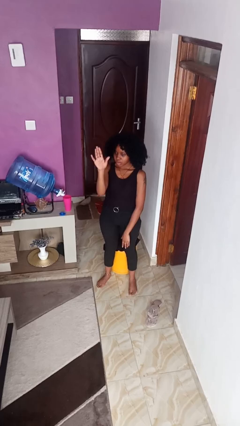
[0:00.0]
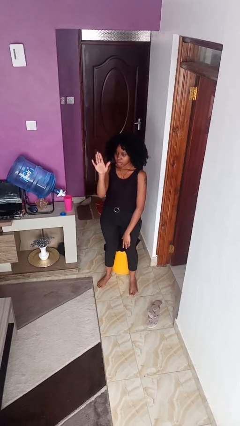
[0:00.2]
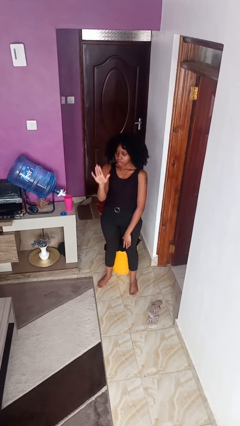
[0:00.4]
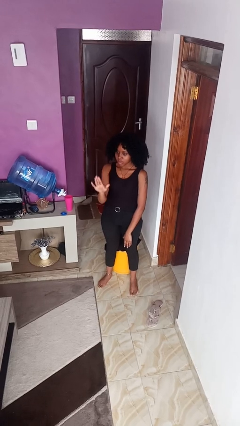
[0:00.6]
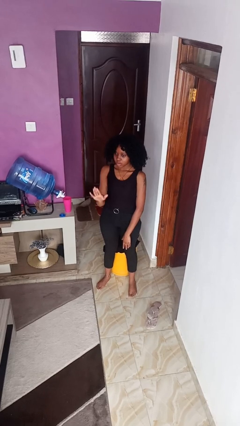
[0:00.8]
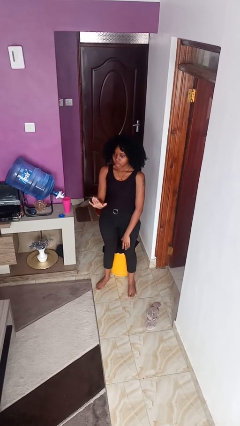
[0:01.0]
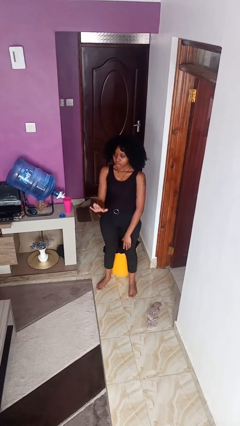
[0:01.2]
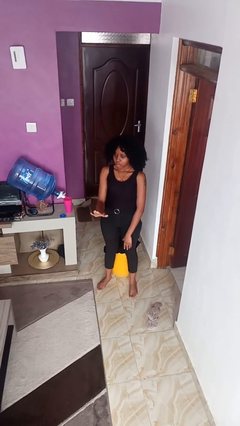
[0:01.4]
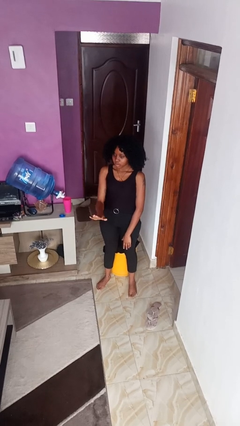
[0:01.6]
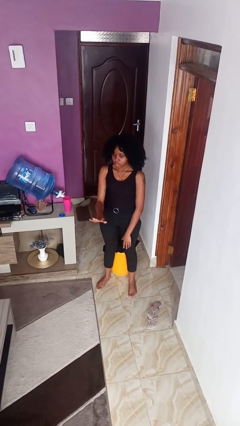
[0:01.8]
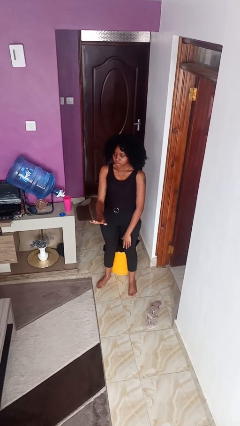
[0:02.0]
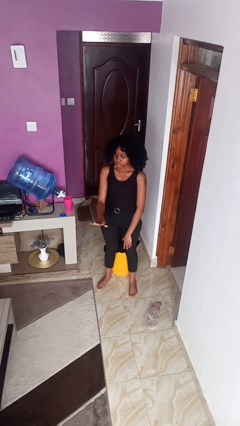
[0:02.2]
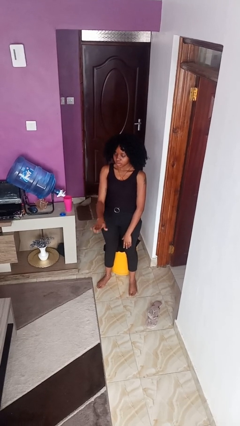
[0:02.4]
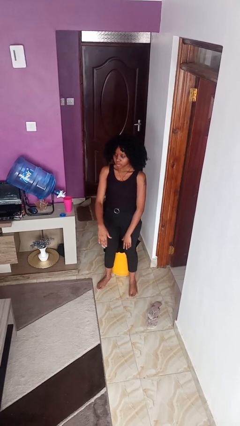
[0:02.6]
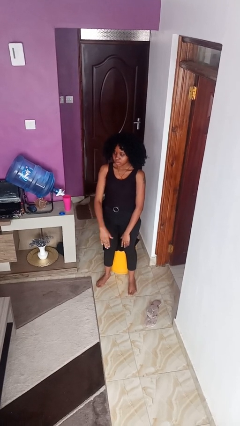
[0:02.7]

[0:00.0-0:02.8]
person gestures swipe down

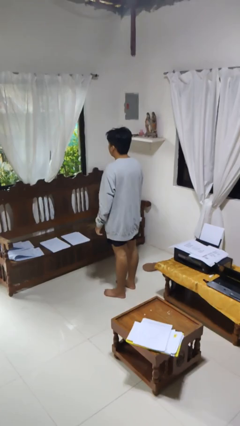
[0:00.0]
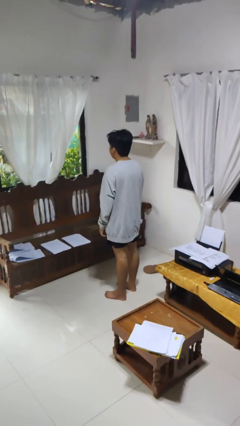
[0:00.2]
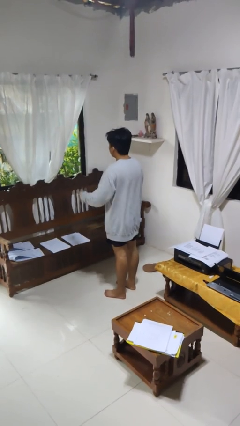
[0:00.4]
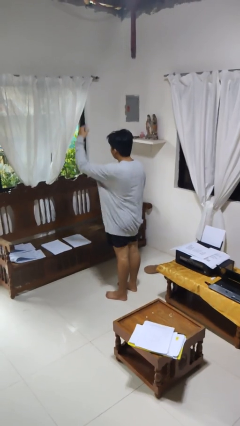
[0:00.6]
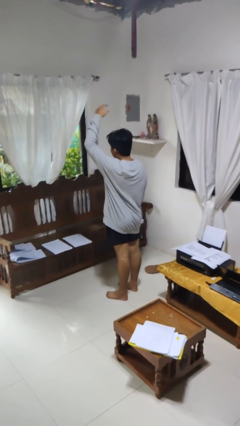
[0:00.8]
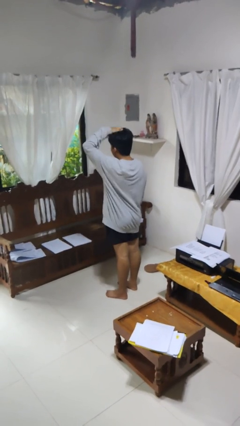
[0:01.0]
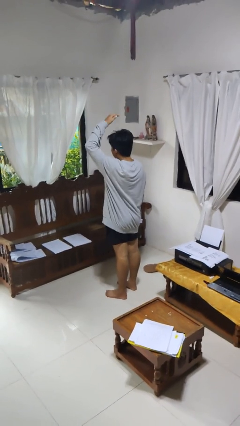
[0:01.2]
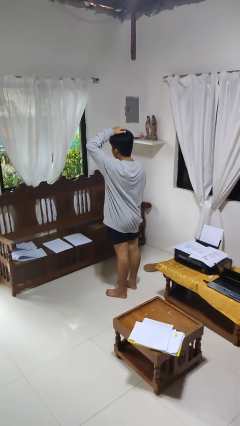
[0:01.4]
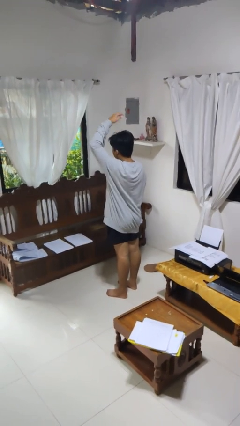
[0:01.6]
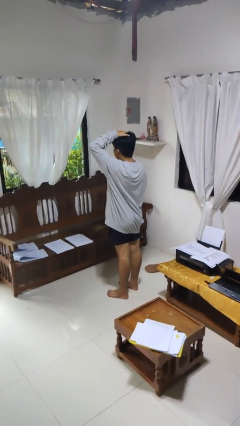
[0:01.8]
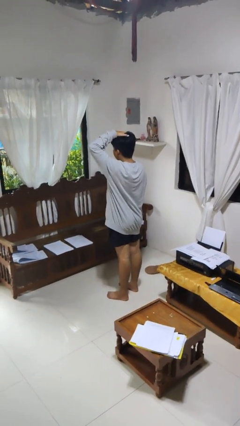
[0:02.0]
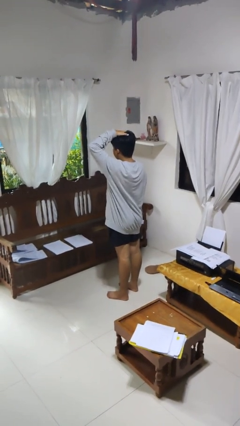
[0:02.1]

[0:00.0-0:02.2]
person pats head

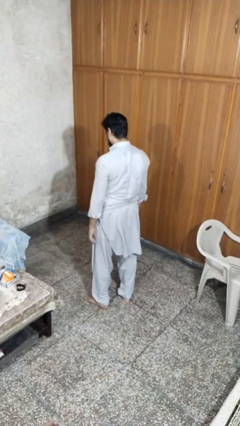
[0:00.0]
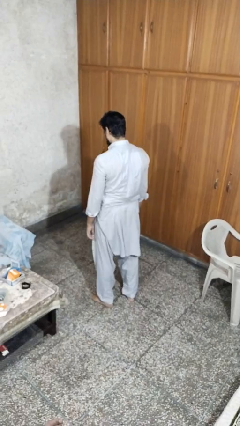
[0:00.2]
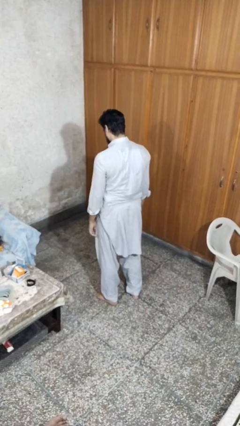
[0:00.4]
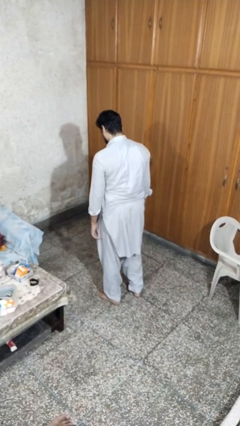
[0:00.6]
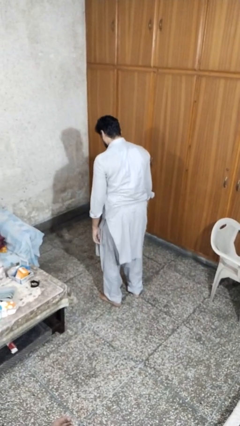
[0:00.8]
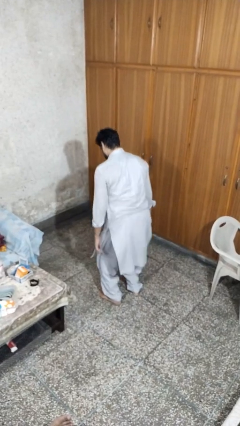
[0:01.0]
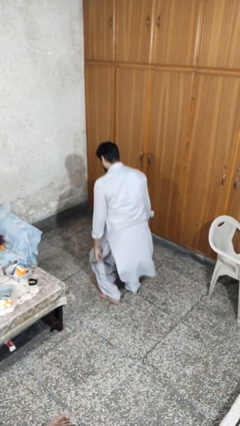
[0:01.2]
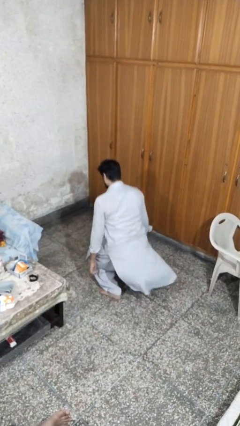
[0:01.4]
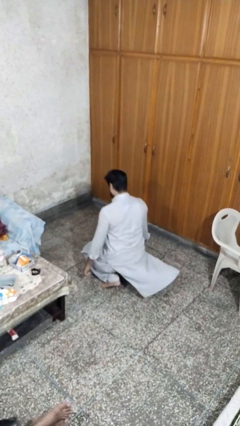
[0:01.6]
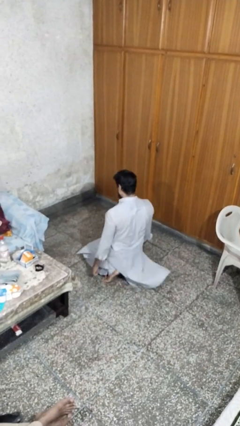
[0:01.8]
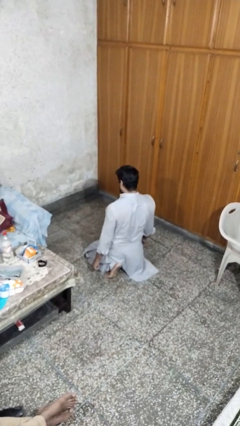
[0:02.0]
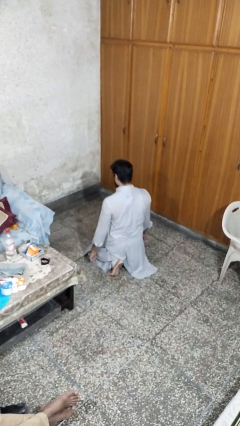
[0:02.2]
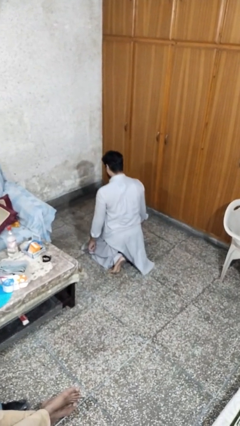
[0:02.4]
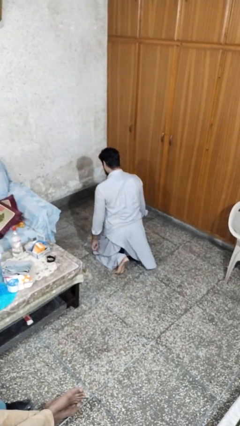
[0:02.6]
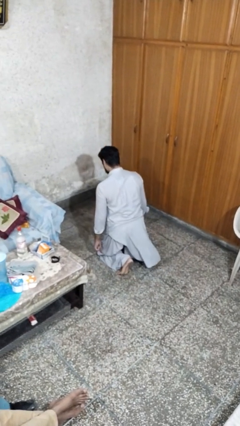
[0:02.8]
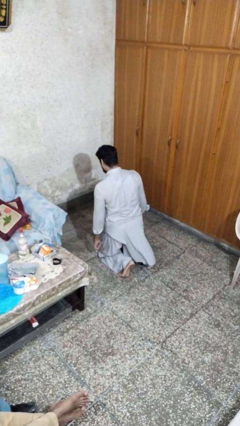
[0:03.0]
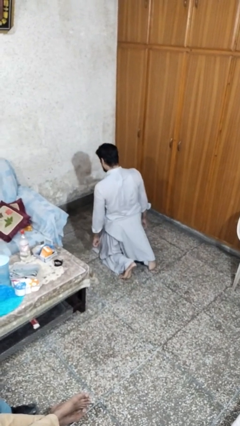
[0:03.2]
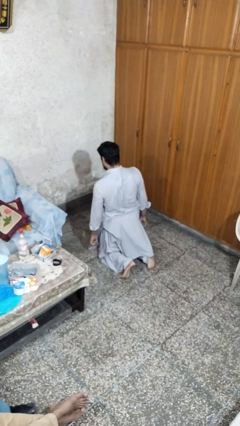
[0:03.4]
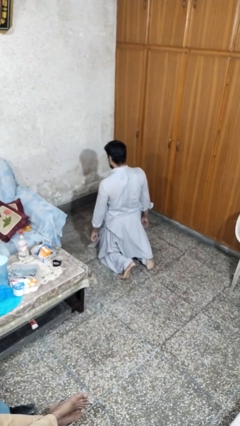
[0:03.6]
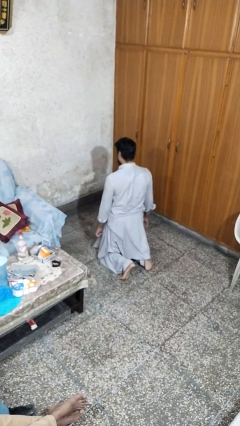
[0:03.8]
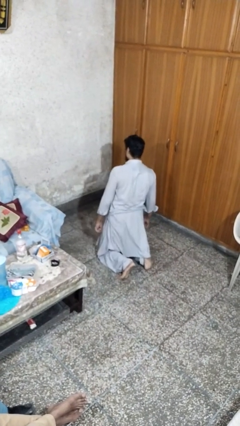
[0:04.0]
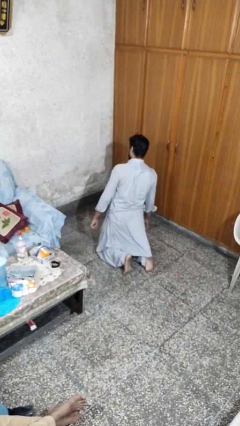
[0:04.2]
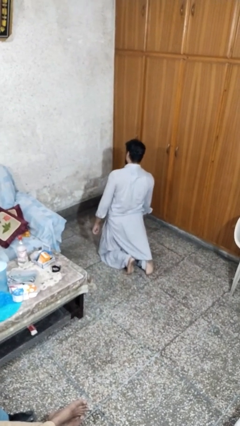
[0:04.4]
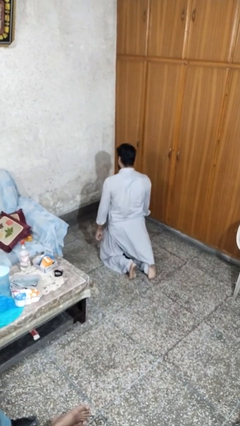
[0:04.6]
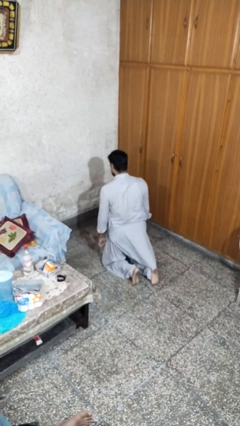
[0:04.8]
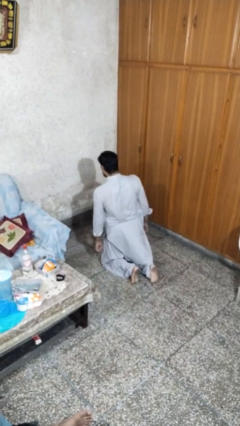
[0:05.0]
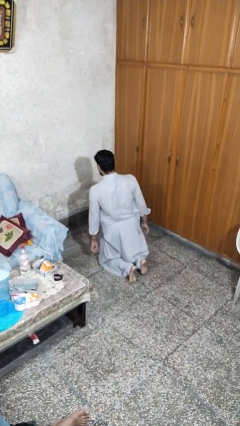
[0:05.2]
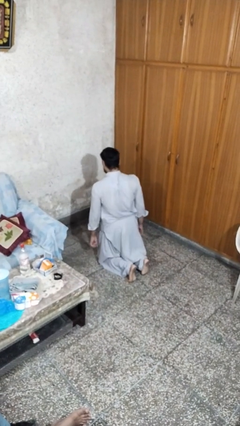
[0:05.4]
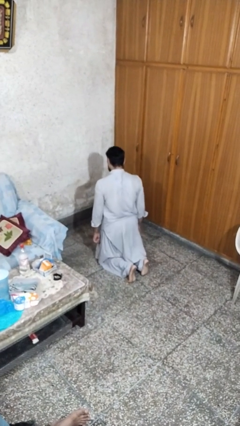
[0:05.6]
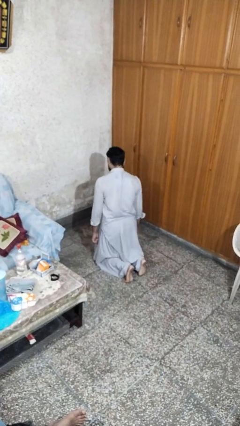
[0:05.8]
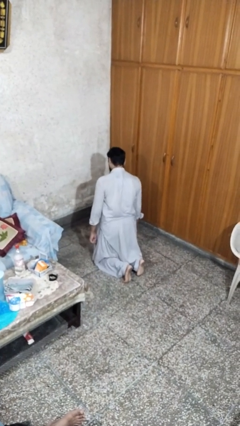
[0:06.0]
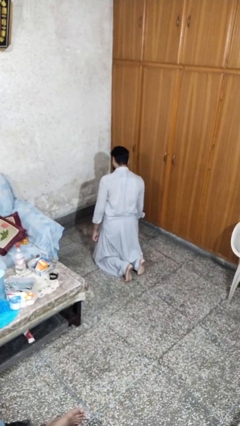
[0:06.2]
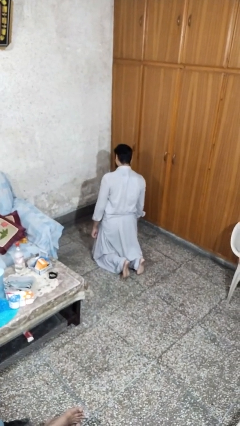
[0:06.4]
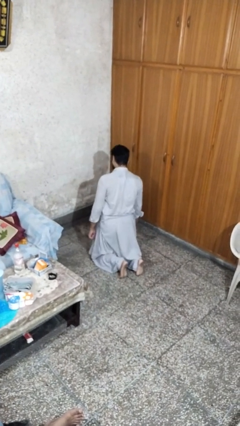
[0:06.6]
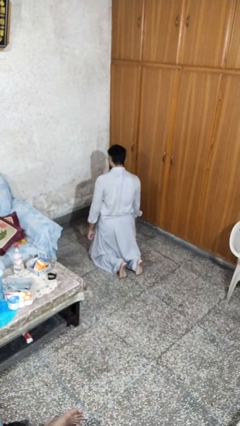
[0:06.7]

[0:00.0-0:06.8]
person exercises with lunges

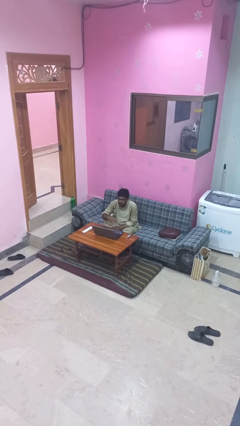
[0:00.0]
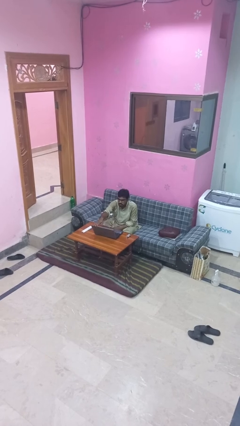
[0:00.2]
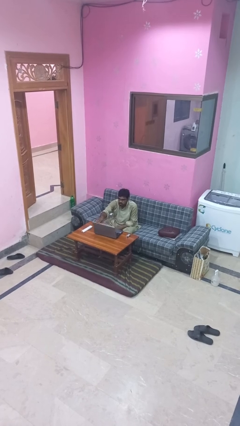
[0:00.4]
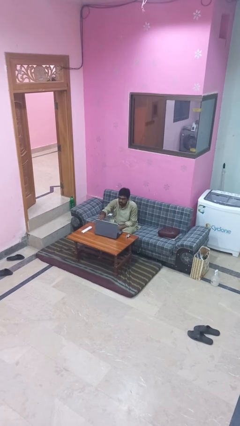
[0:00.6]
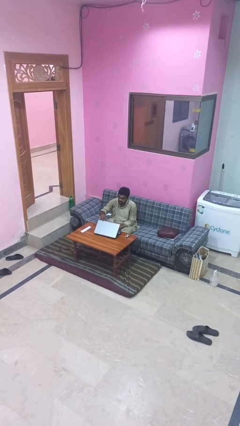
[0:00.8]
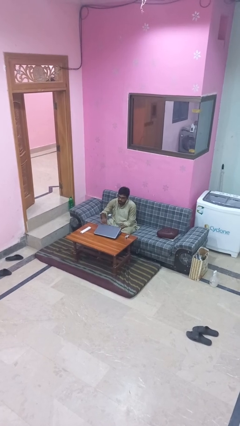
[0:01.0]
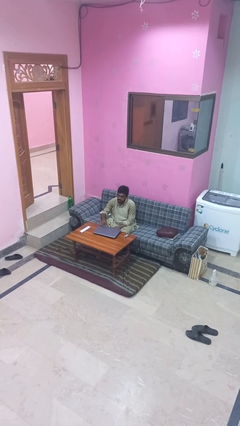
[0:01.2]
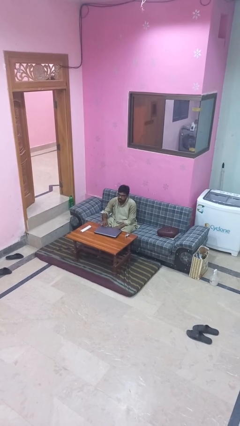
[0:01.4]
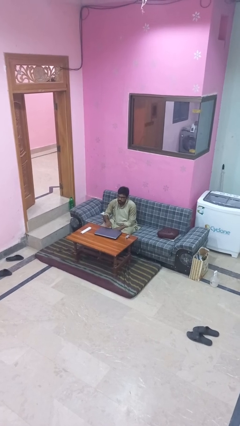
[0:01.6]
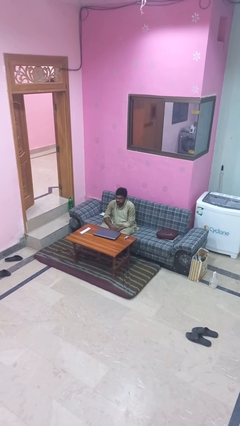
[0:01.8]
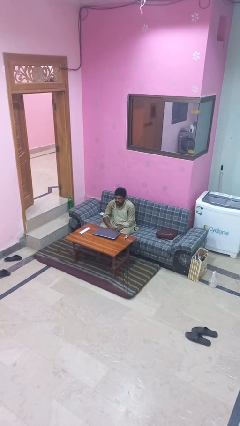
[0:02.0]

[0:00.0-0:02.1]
person closes laptop

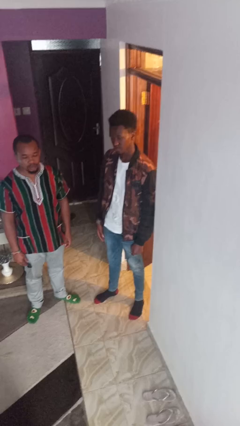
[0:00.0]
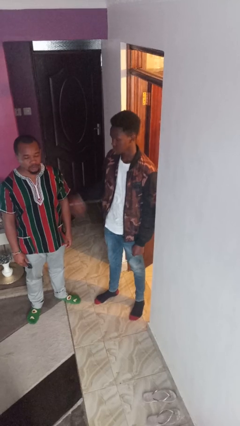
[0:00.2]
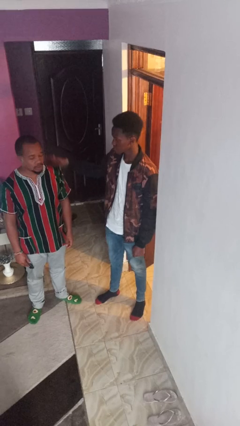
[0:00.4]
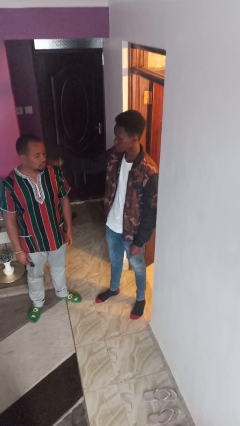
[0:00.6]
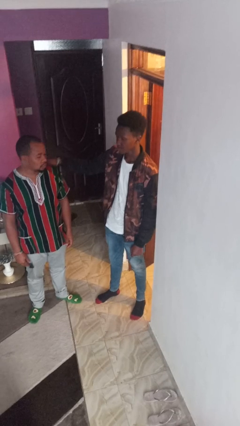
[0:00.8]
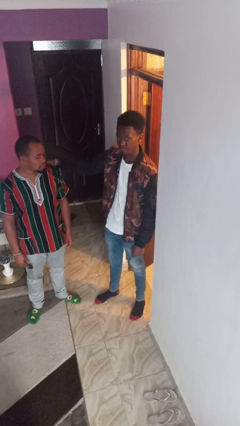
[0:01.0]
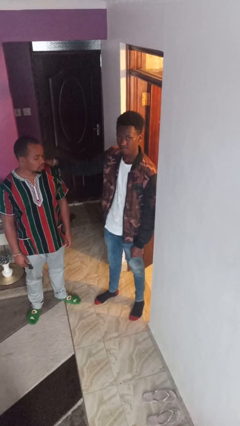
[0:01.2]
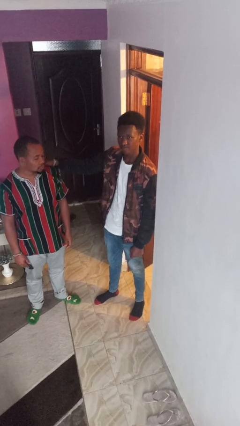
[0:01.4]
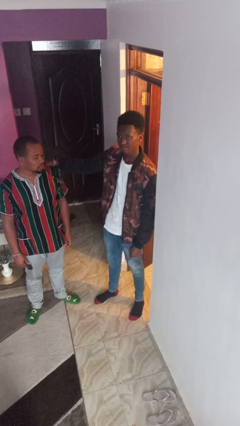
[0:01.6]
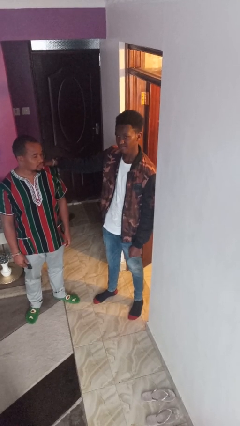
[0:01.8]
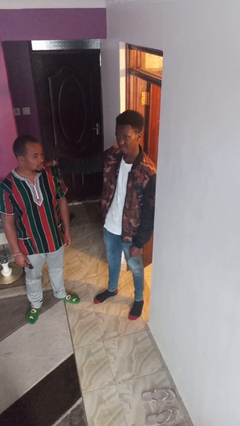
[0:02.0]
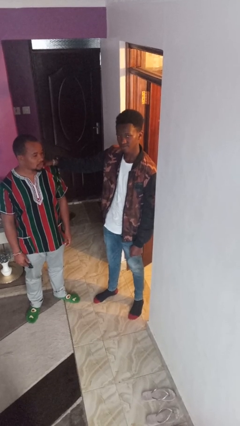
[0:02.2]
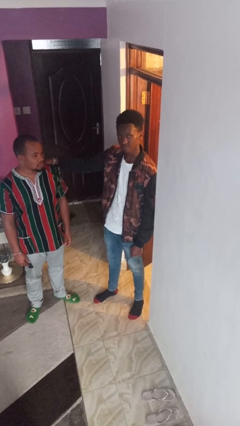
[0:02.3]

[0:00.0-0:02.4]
person pounds shoulders of person

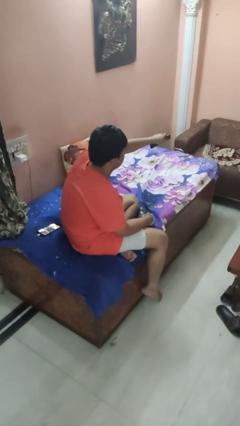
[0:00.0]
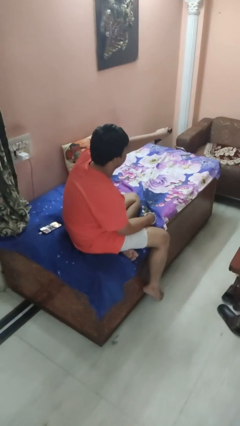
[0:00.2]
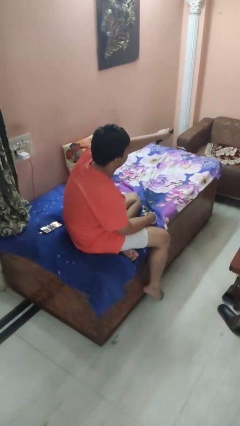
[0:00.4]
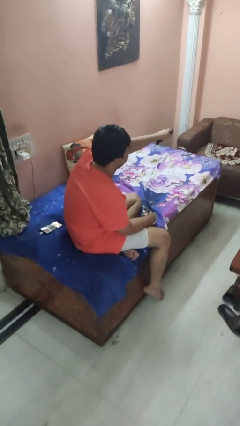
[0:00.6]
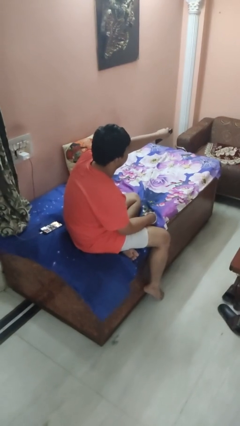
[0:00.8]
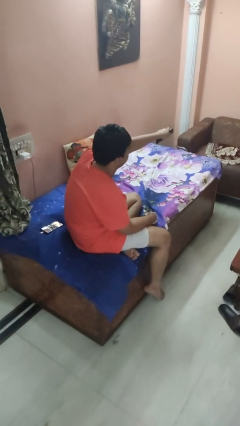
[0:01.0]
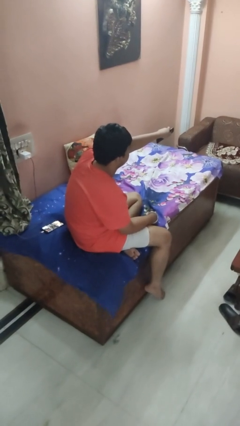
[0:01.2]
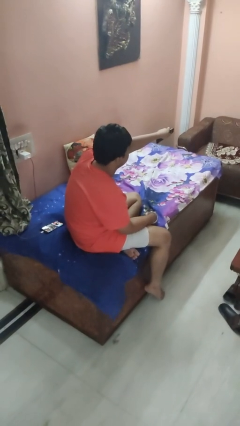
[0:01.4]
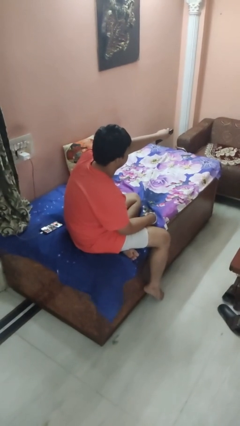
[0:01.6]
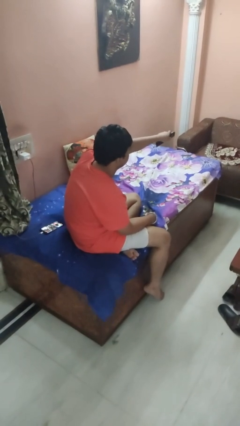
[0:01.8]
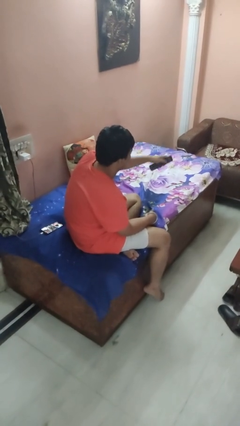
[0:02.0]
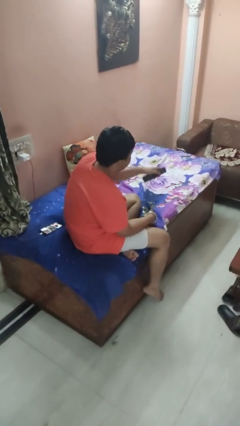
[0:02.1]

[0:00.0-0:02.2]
person uses television remote
